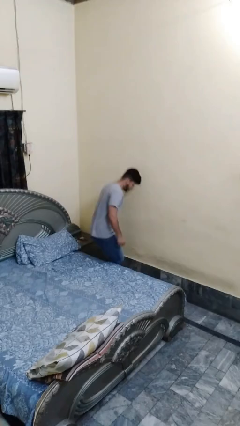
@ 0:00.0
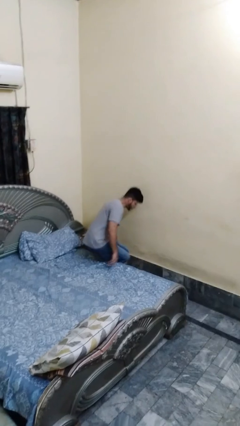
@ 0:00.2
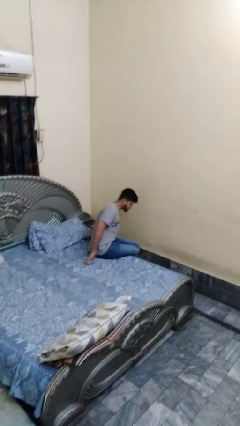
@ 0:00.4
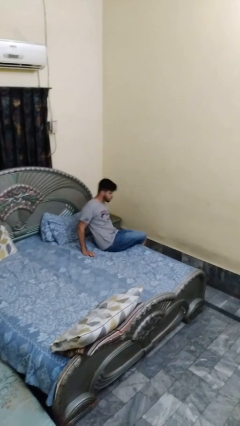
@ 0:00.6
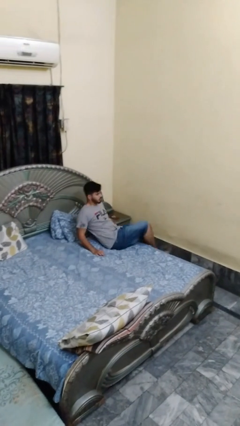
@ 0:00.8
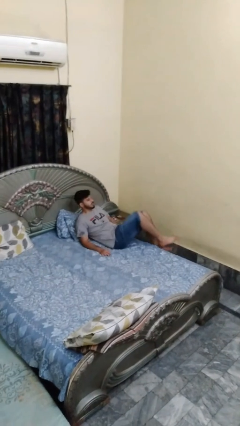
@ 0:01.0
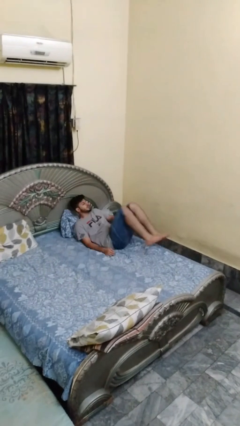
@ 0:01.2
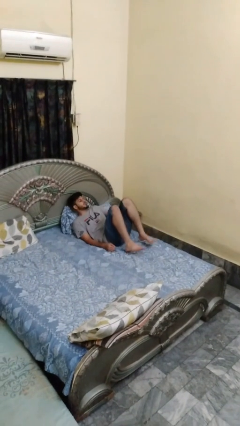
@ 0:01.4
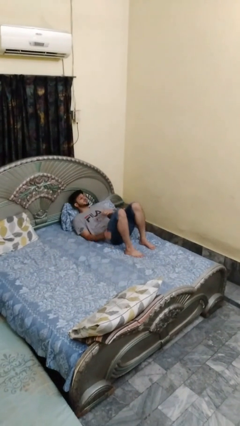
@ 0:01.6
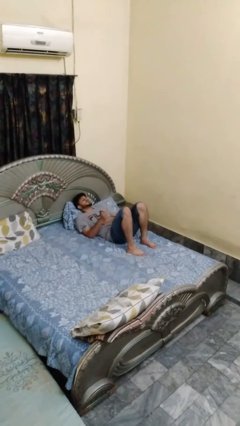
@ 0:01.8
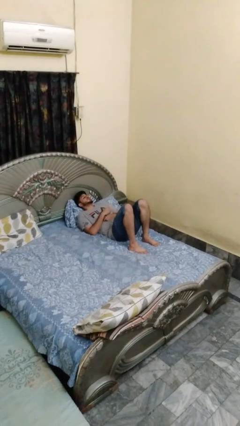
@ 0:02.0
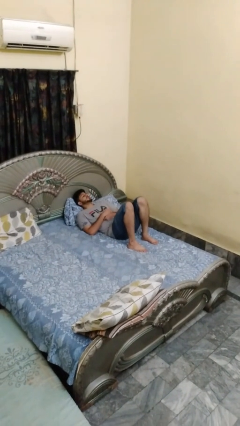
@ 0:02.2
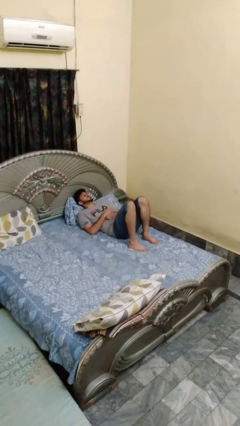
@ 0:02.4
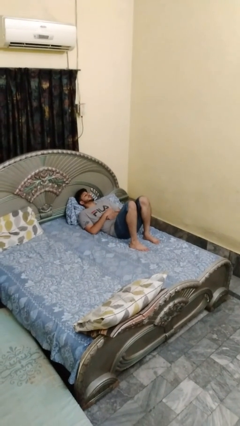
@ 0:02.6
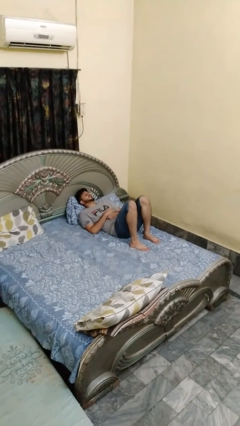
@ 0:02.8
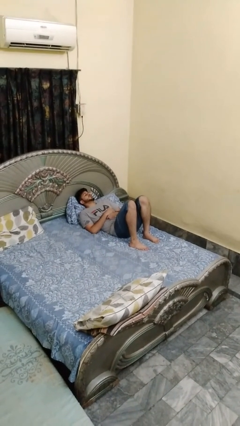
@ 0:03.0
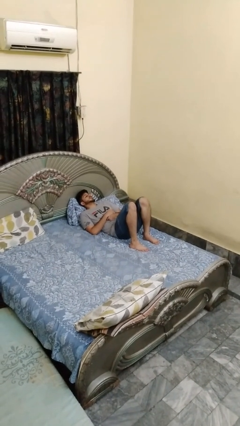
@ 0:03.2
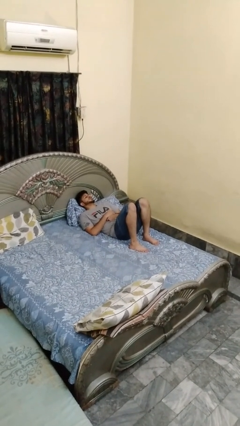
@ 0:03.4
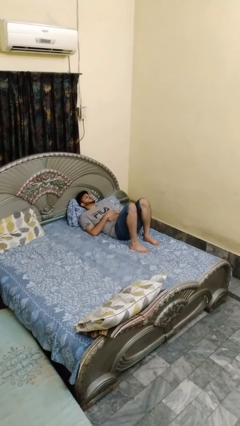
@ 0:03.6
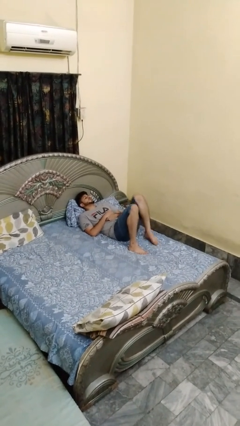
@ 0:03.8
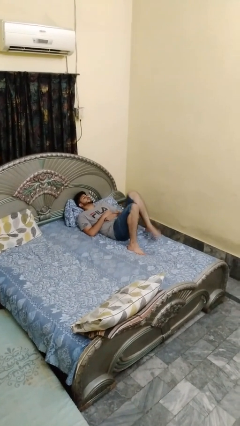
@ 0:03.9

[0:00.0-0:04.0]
person lies down on bed

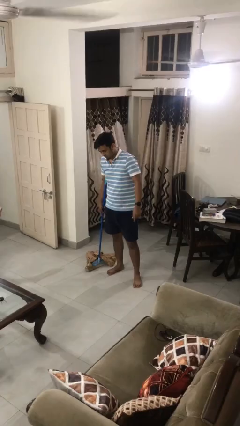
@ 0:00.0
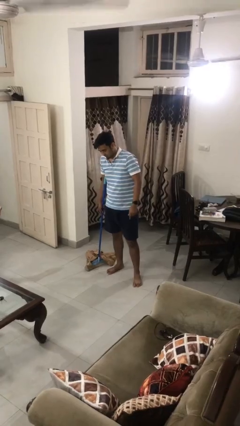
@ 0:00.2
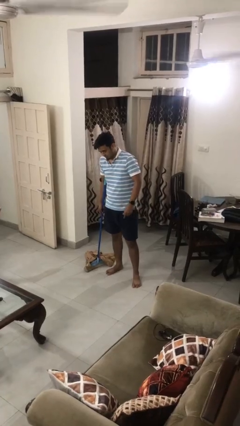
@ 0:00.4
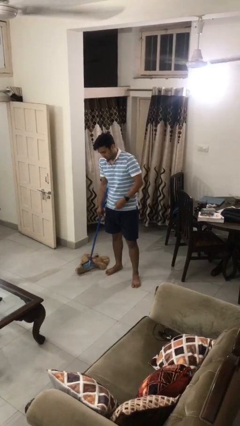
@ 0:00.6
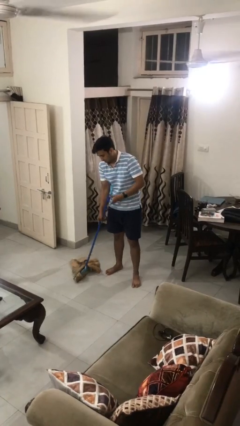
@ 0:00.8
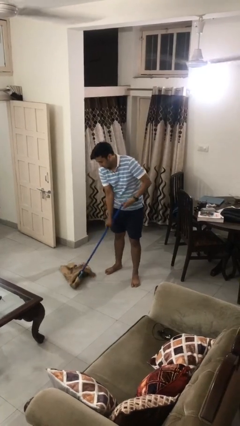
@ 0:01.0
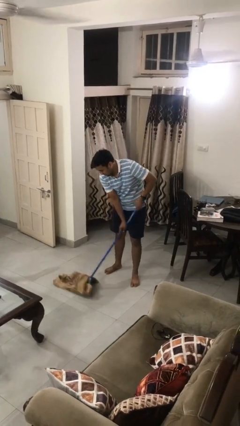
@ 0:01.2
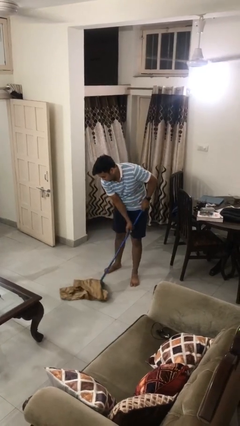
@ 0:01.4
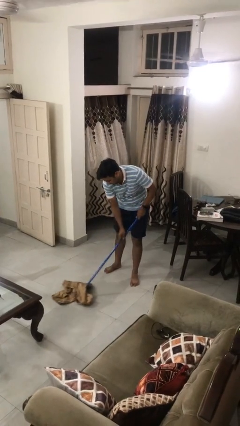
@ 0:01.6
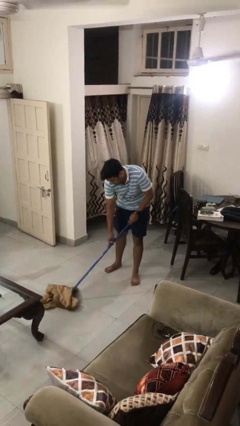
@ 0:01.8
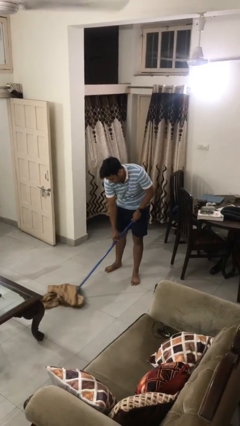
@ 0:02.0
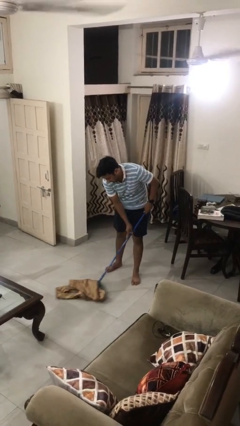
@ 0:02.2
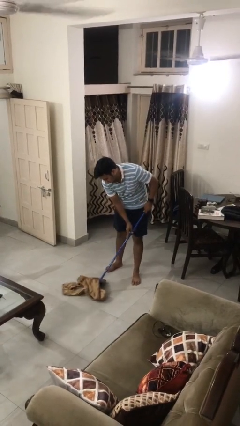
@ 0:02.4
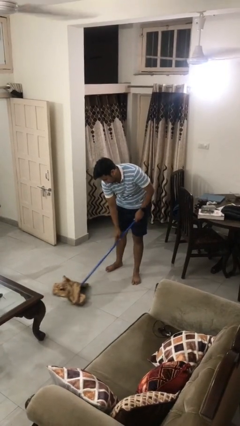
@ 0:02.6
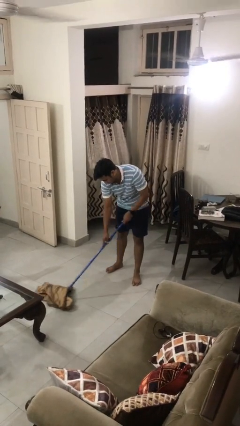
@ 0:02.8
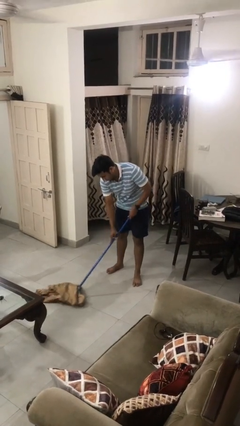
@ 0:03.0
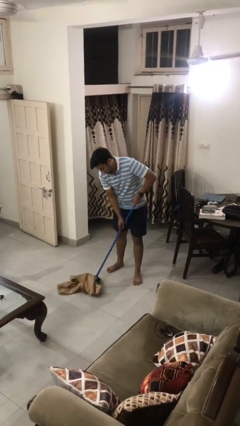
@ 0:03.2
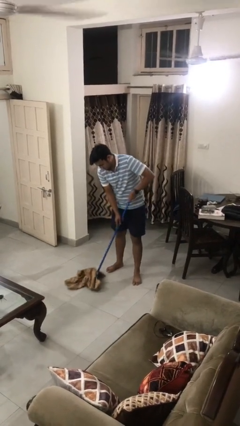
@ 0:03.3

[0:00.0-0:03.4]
person mops

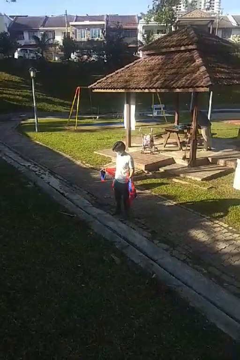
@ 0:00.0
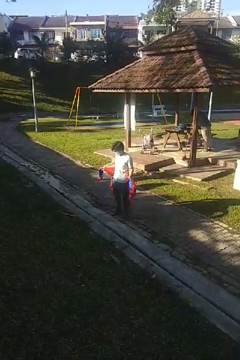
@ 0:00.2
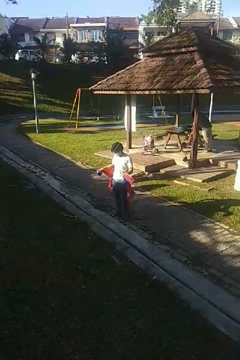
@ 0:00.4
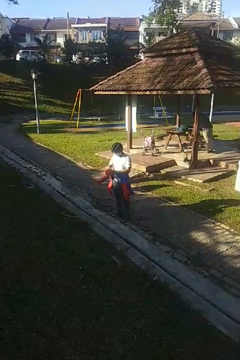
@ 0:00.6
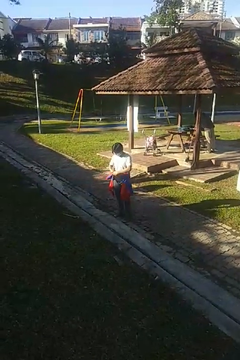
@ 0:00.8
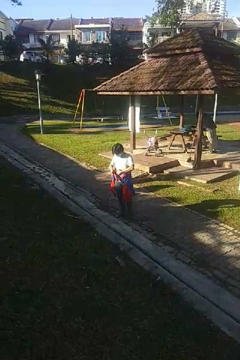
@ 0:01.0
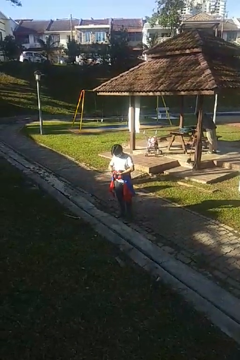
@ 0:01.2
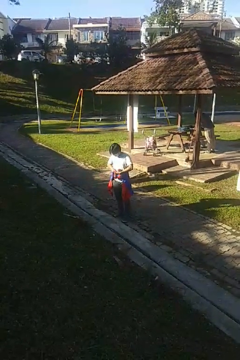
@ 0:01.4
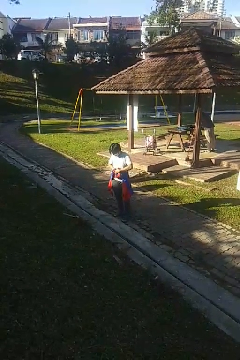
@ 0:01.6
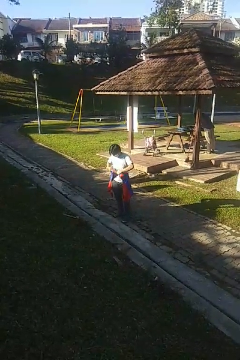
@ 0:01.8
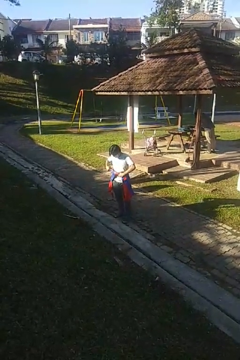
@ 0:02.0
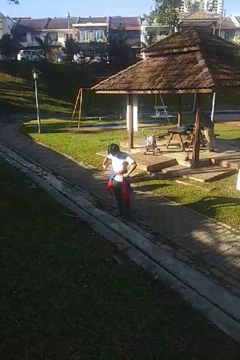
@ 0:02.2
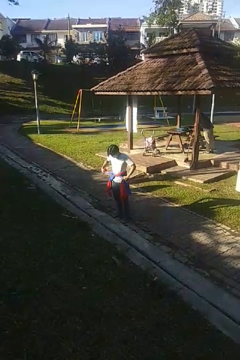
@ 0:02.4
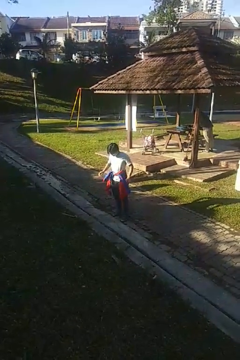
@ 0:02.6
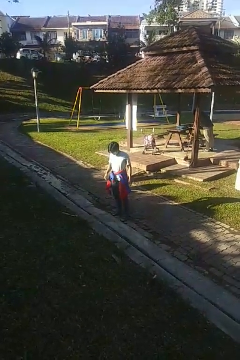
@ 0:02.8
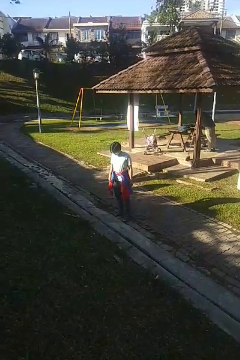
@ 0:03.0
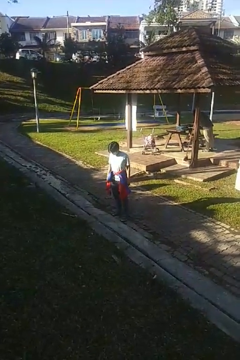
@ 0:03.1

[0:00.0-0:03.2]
person ties jacket around waist

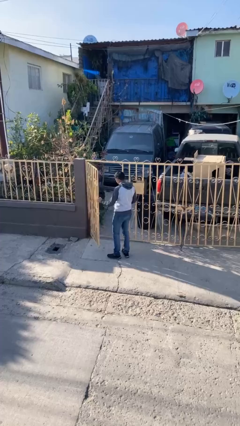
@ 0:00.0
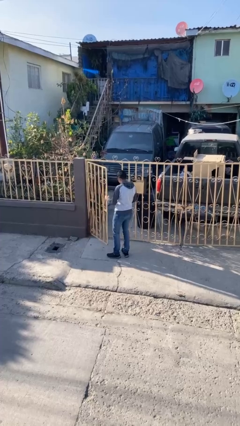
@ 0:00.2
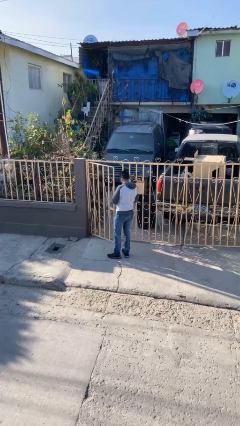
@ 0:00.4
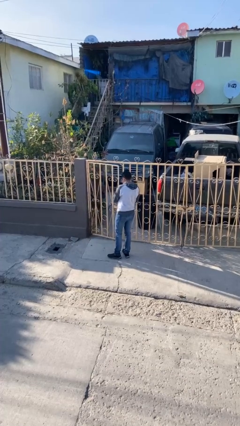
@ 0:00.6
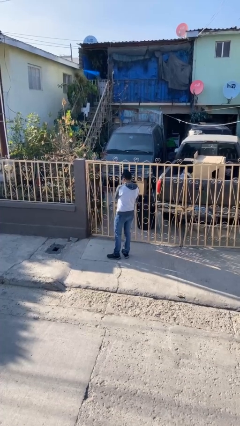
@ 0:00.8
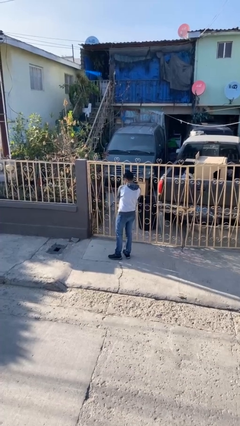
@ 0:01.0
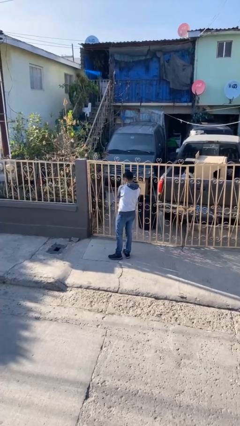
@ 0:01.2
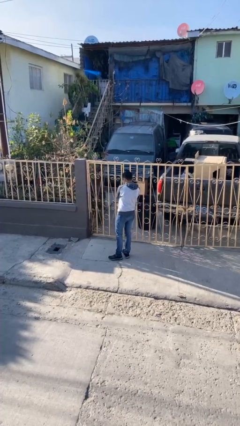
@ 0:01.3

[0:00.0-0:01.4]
person closes facility door

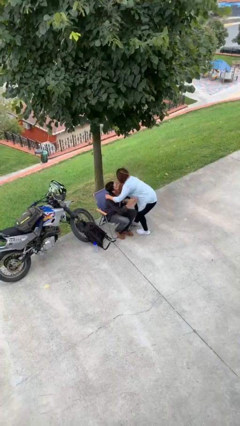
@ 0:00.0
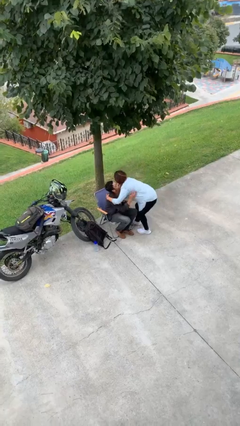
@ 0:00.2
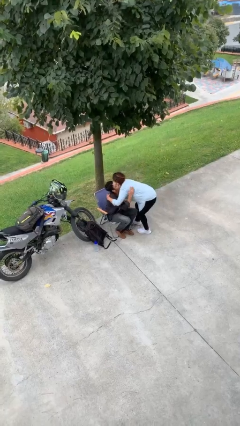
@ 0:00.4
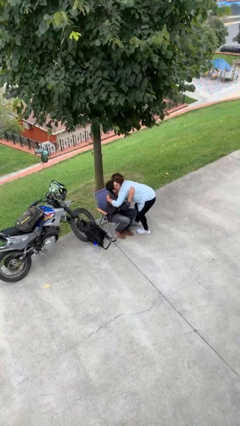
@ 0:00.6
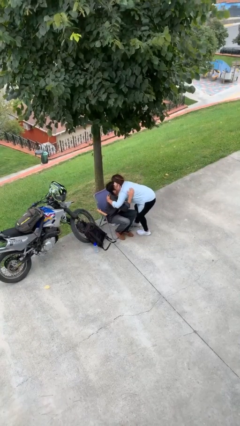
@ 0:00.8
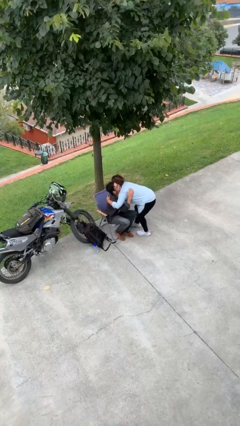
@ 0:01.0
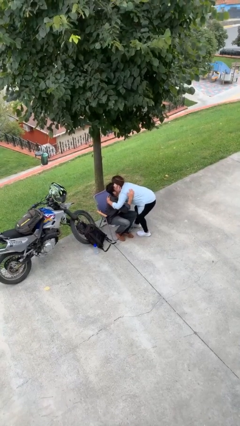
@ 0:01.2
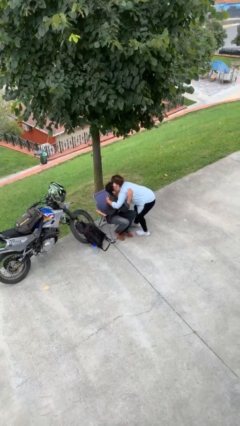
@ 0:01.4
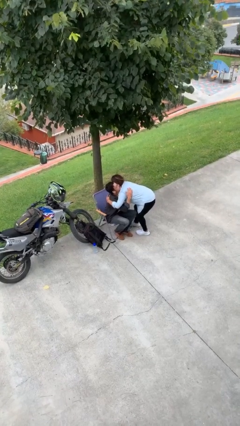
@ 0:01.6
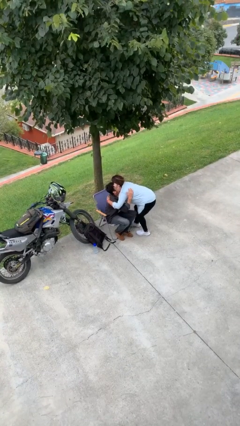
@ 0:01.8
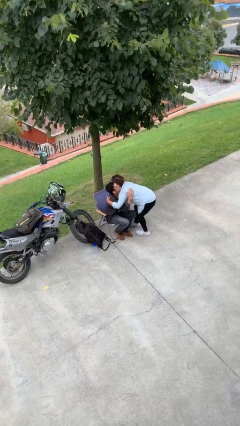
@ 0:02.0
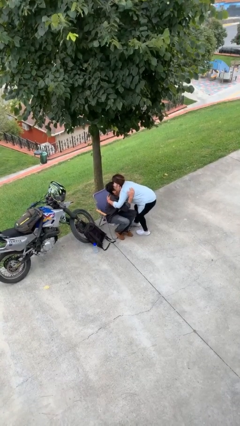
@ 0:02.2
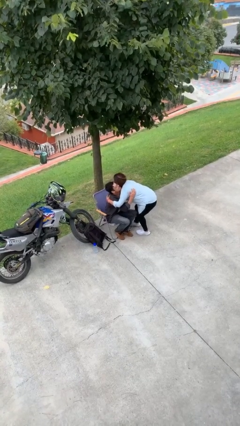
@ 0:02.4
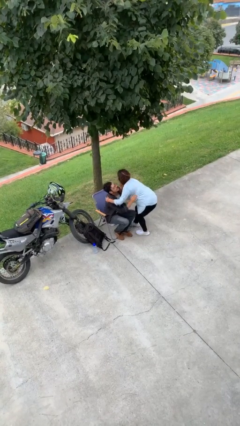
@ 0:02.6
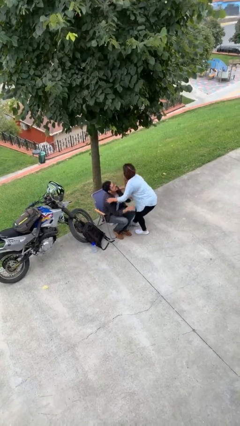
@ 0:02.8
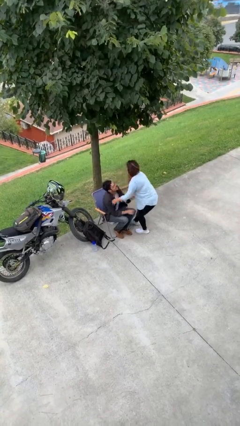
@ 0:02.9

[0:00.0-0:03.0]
person embraces person

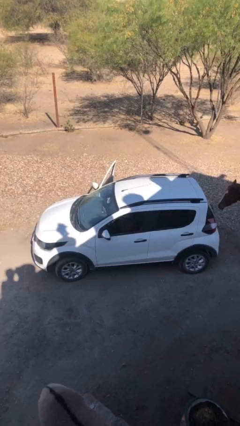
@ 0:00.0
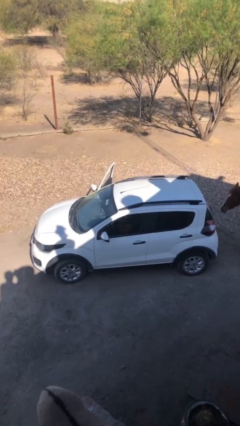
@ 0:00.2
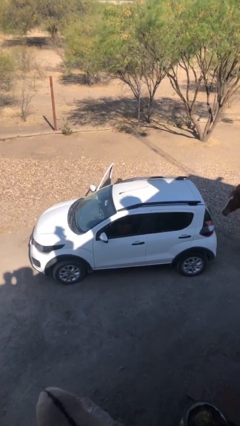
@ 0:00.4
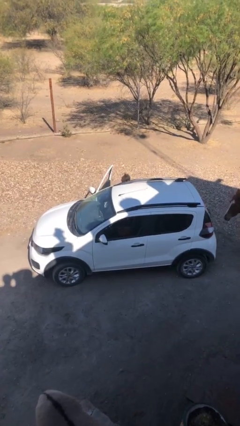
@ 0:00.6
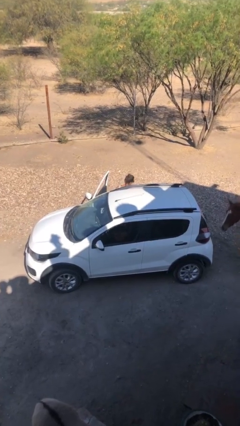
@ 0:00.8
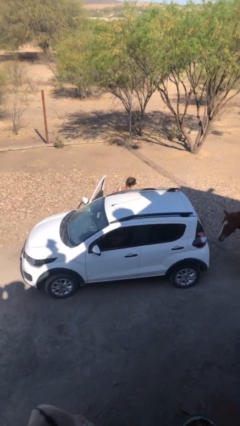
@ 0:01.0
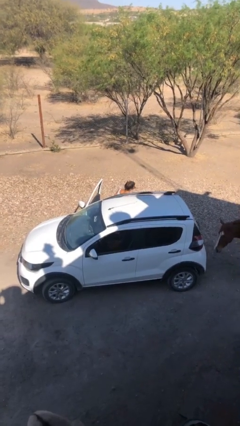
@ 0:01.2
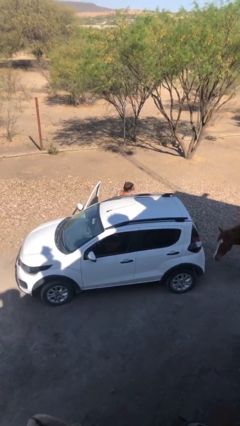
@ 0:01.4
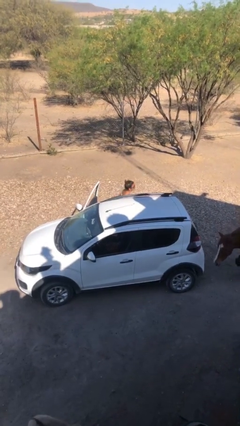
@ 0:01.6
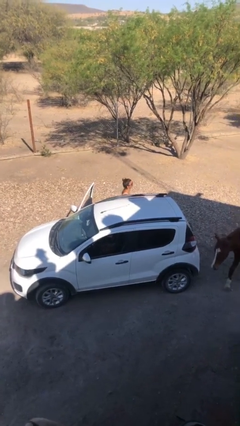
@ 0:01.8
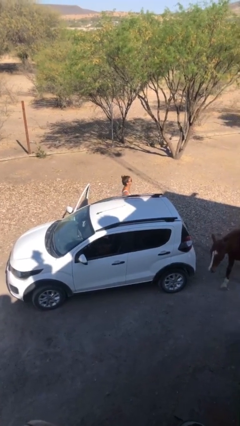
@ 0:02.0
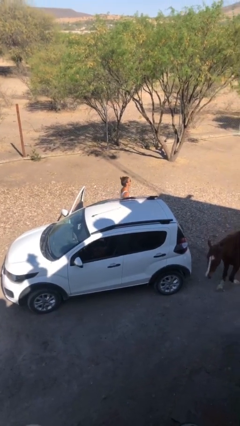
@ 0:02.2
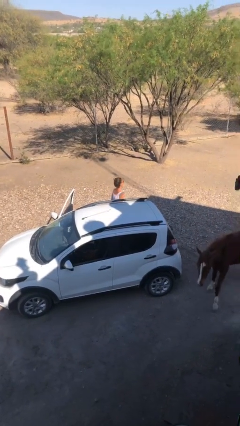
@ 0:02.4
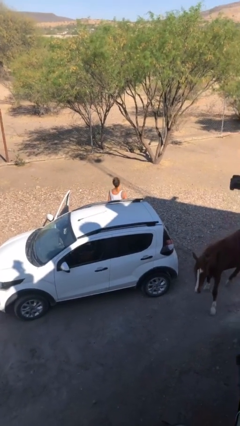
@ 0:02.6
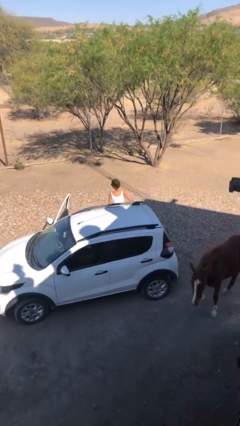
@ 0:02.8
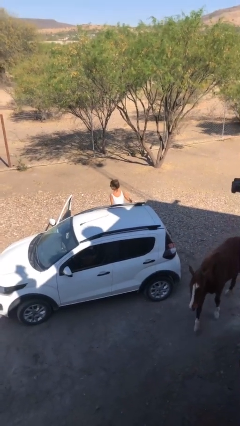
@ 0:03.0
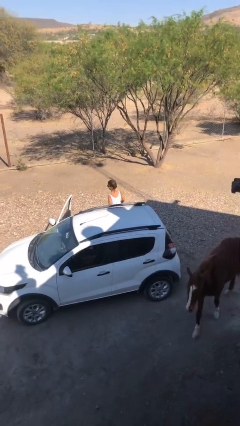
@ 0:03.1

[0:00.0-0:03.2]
person exits car
